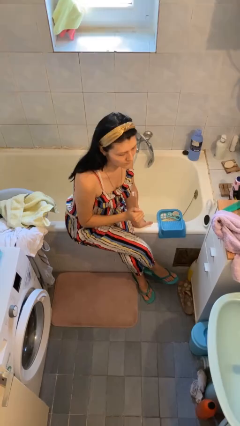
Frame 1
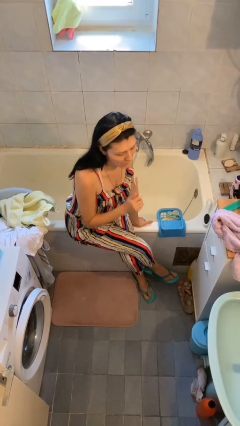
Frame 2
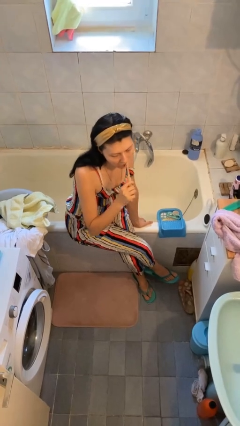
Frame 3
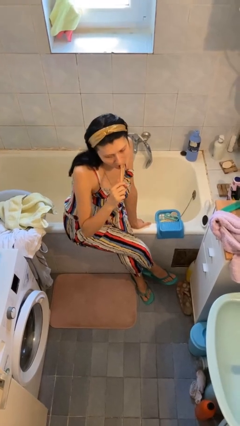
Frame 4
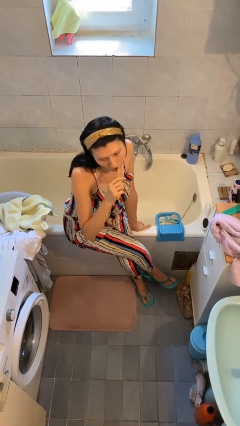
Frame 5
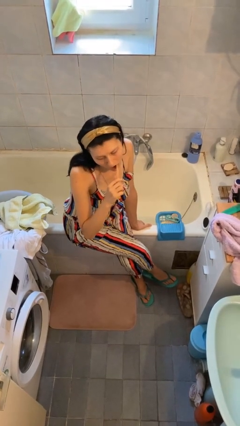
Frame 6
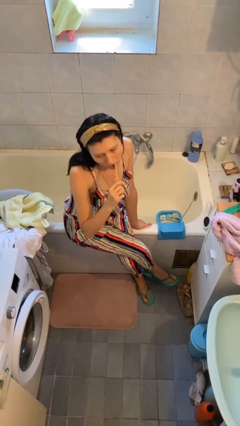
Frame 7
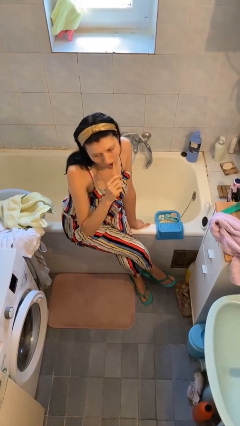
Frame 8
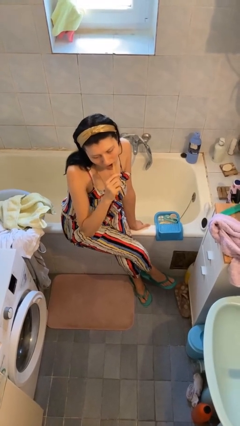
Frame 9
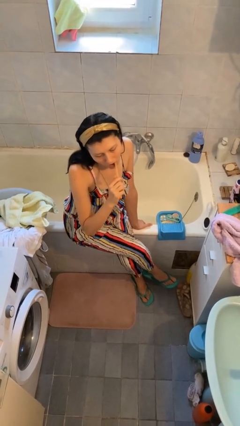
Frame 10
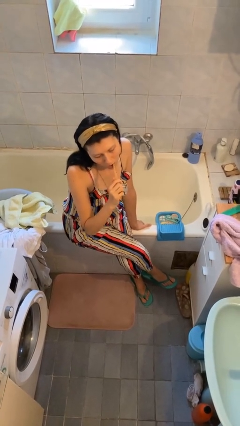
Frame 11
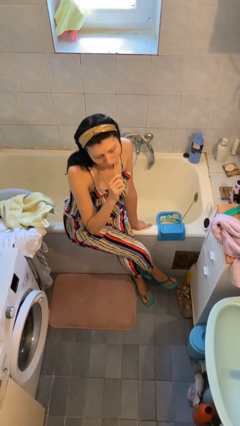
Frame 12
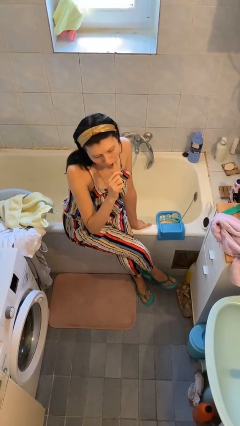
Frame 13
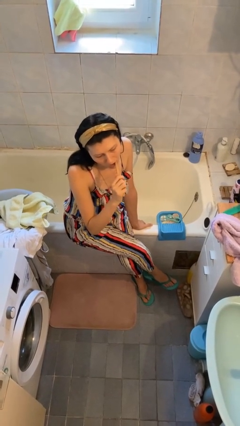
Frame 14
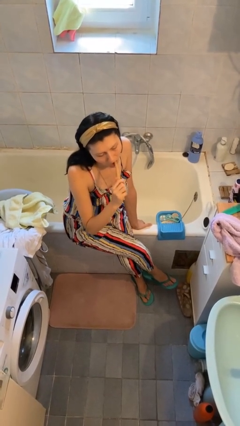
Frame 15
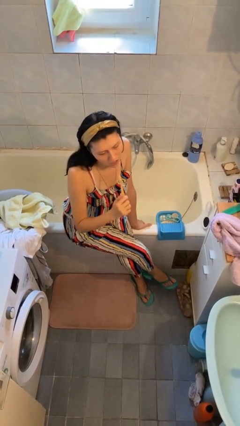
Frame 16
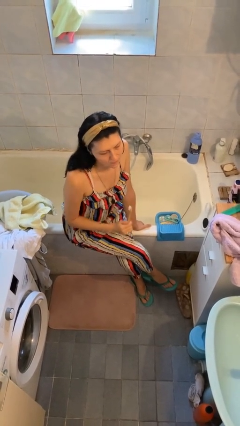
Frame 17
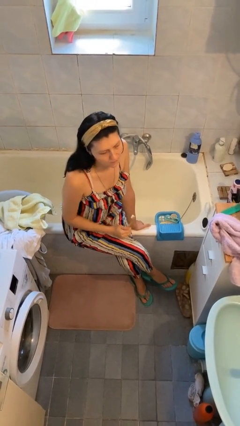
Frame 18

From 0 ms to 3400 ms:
person brushes teeth

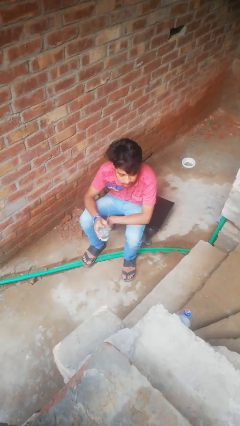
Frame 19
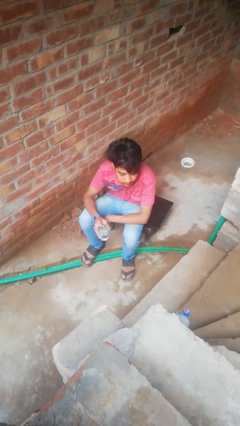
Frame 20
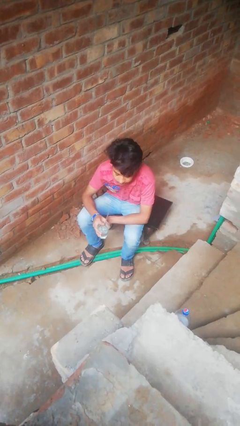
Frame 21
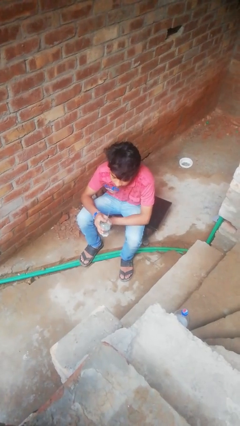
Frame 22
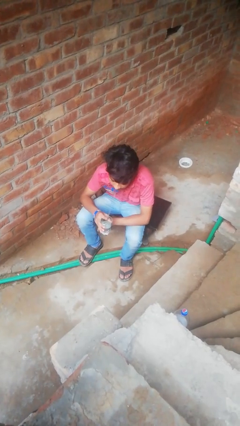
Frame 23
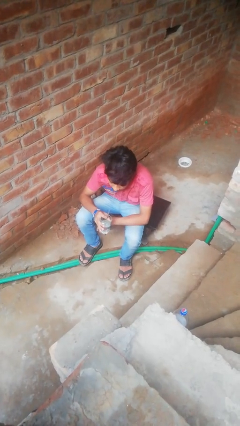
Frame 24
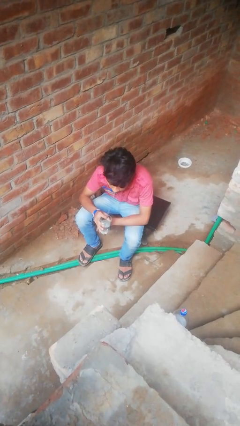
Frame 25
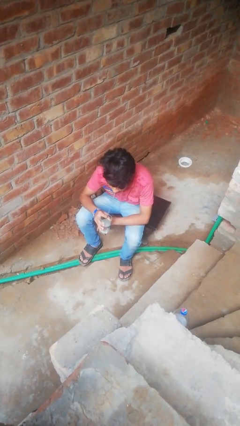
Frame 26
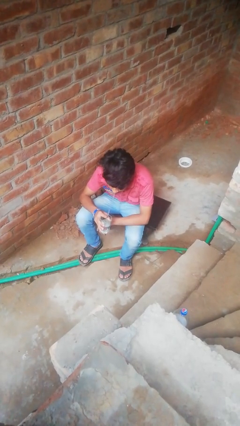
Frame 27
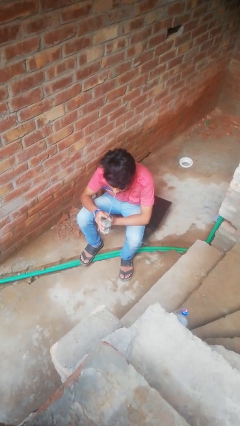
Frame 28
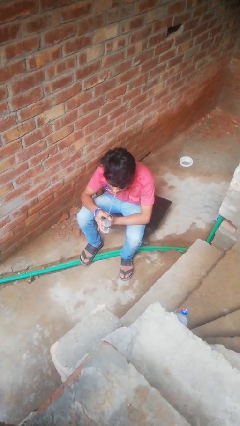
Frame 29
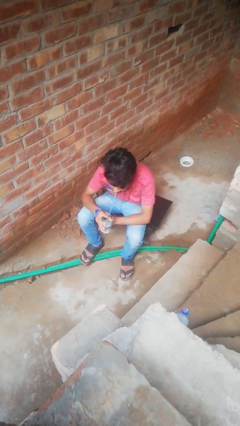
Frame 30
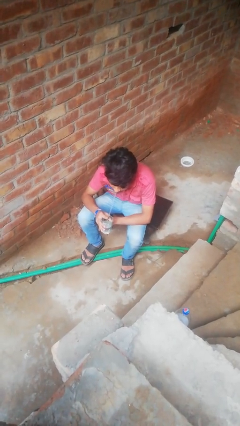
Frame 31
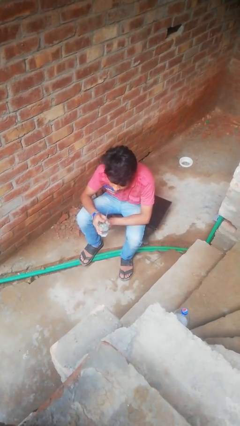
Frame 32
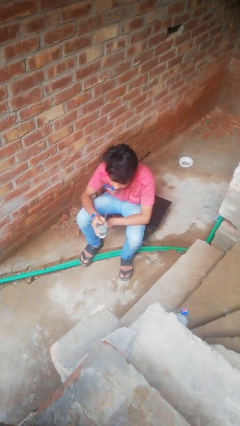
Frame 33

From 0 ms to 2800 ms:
person drinks from straw

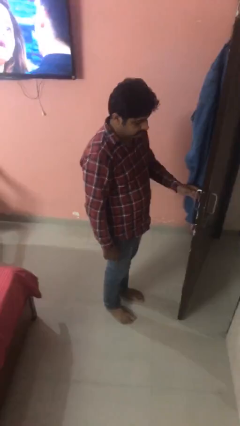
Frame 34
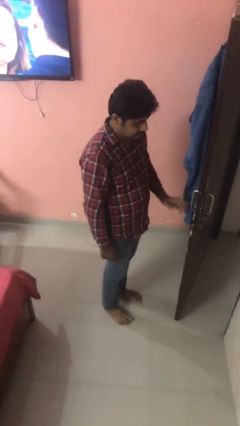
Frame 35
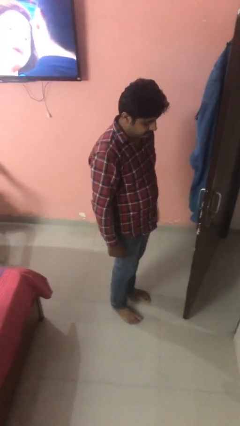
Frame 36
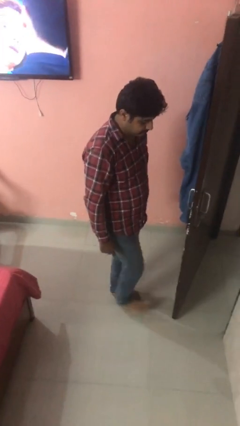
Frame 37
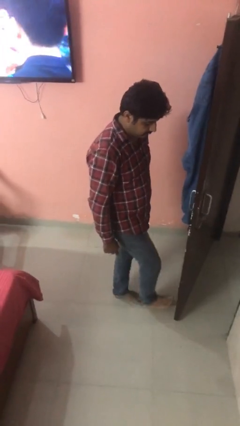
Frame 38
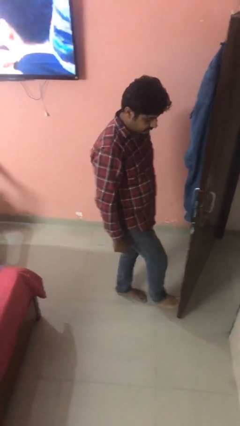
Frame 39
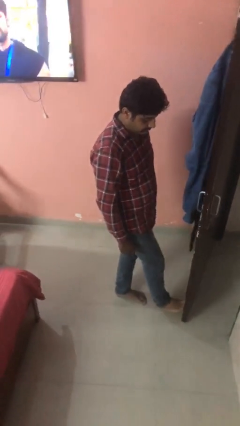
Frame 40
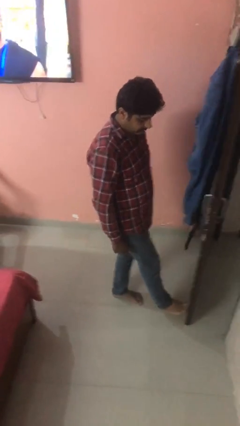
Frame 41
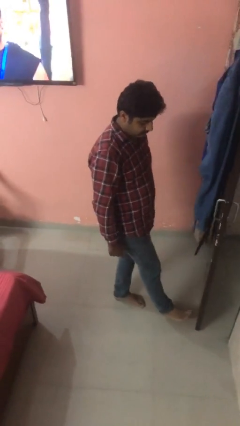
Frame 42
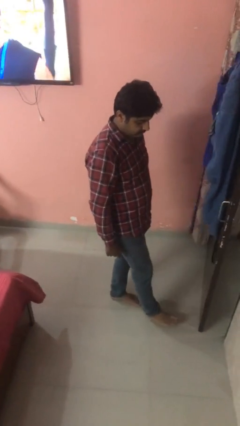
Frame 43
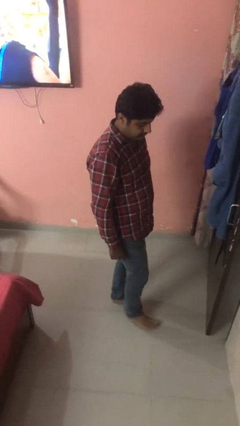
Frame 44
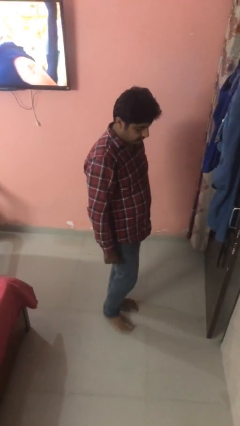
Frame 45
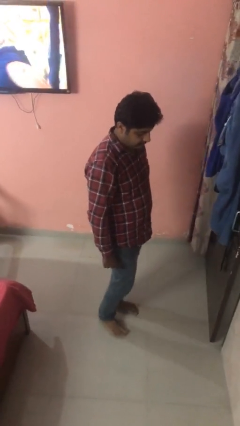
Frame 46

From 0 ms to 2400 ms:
person closes door with foot

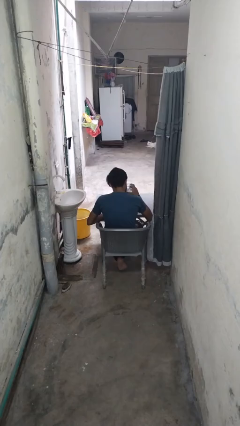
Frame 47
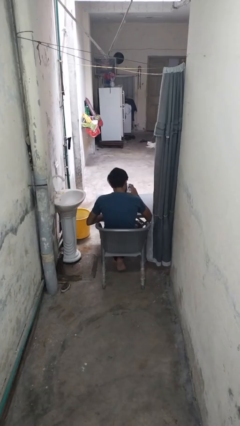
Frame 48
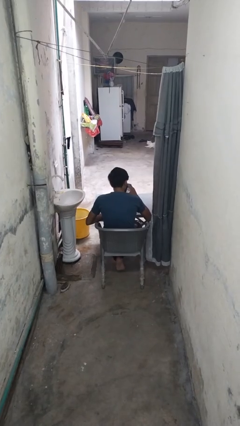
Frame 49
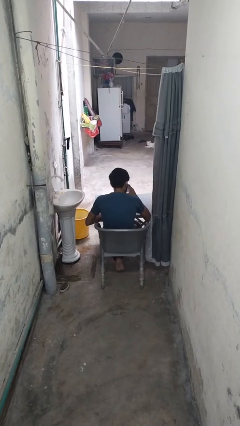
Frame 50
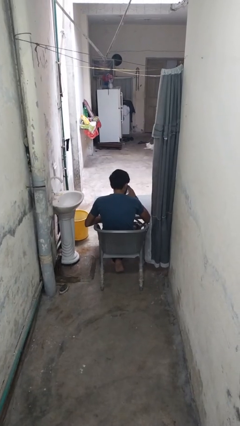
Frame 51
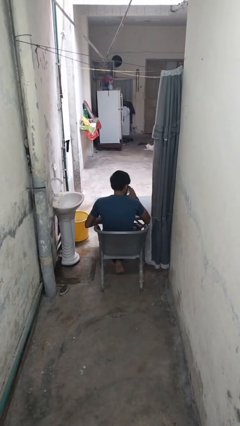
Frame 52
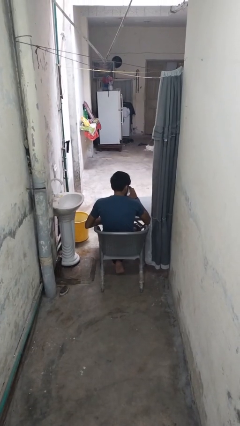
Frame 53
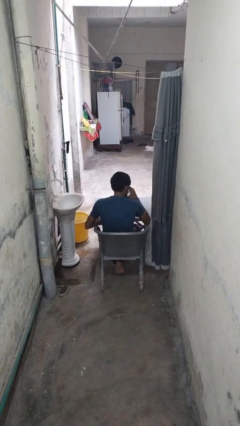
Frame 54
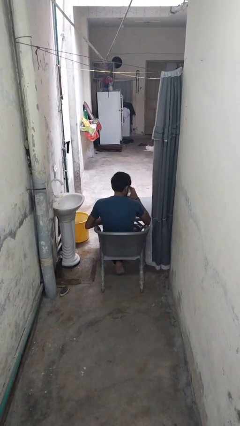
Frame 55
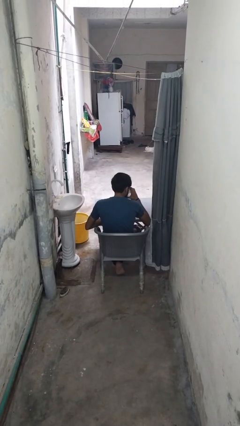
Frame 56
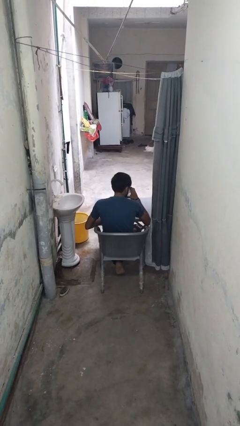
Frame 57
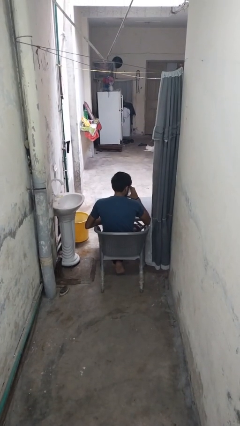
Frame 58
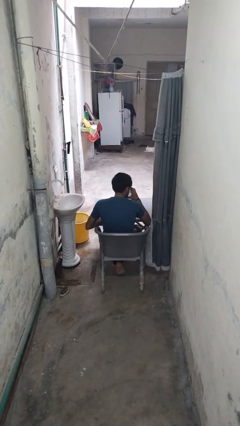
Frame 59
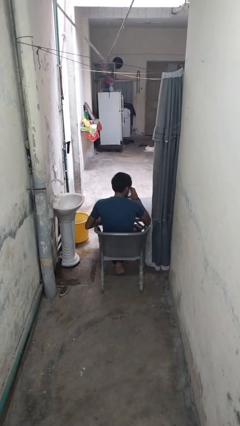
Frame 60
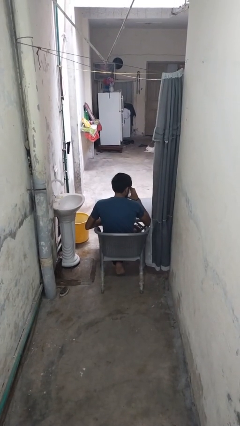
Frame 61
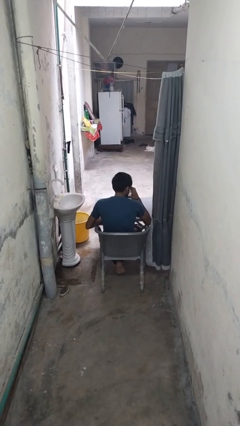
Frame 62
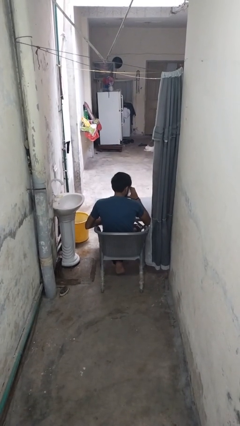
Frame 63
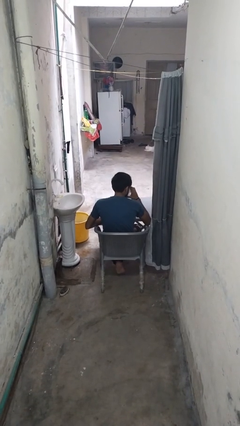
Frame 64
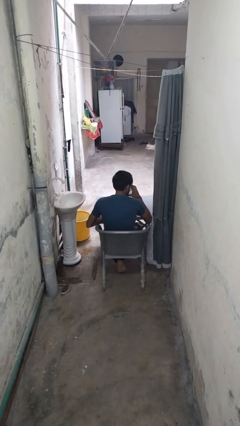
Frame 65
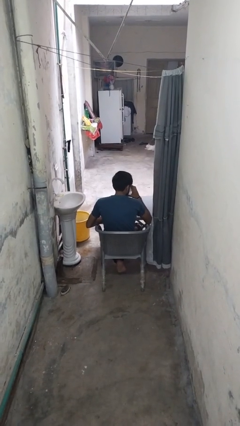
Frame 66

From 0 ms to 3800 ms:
person drinks from mug

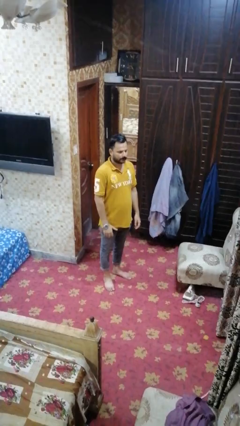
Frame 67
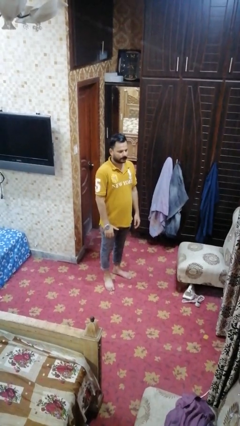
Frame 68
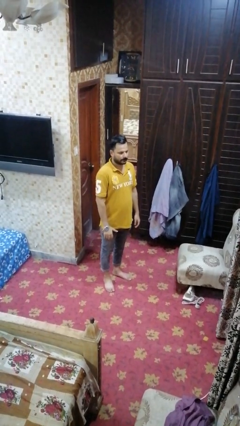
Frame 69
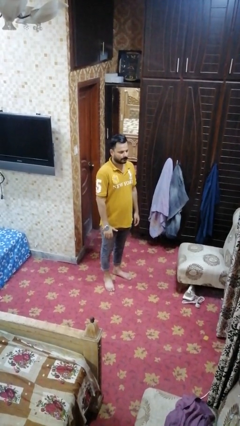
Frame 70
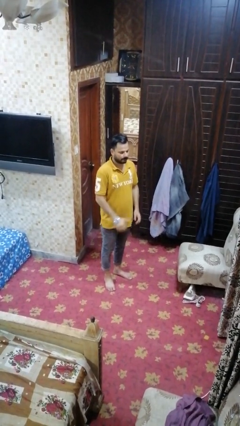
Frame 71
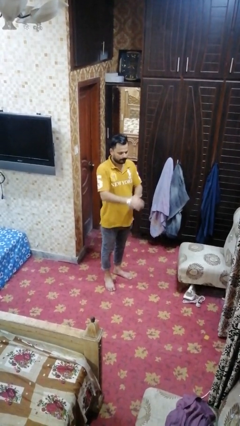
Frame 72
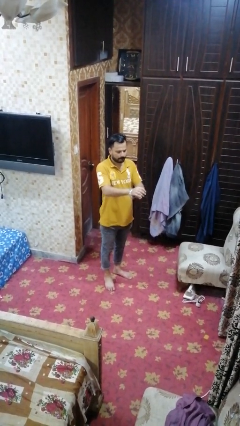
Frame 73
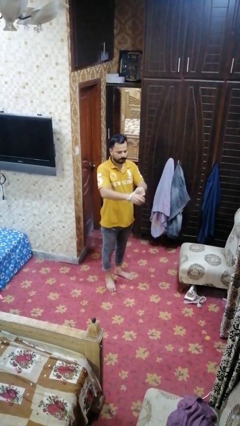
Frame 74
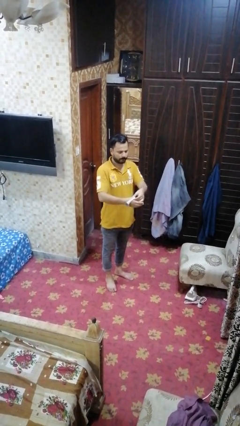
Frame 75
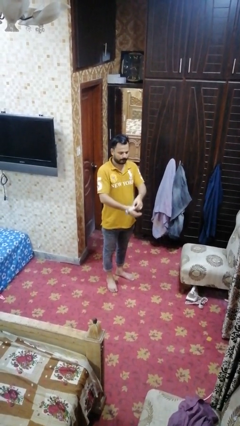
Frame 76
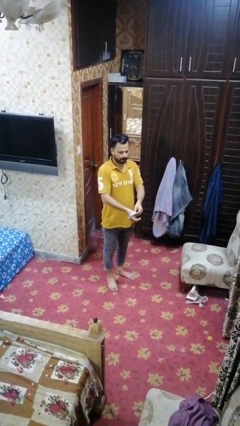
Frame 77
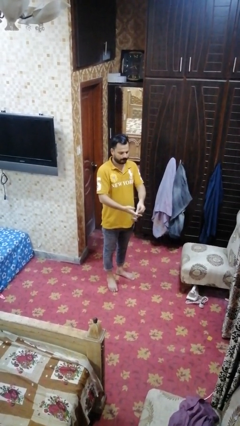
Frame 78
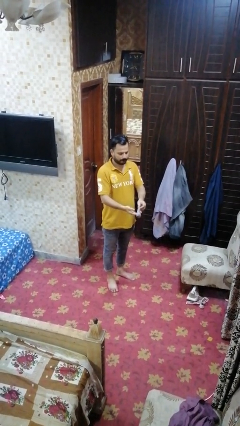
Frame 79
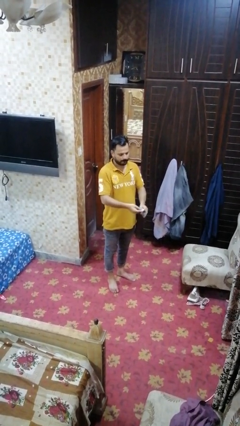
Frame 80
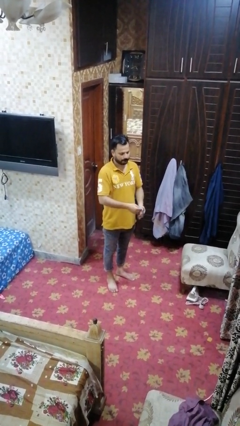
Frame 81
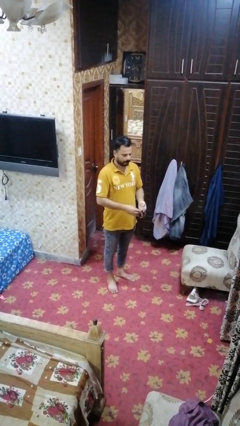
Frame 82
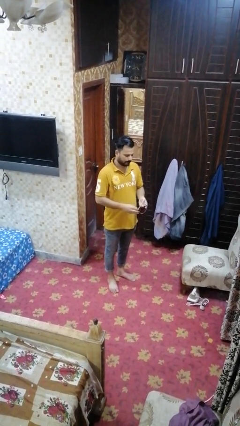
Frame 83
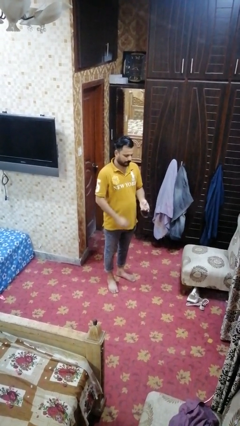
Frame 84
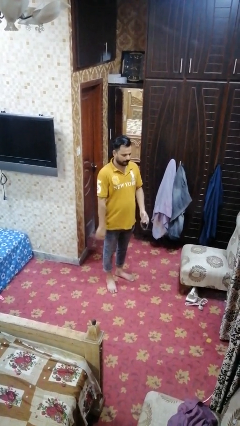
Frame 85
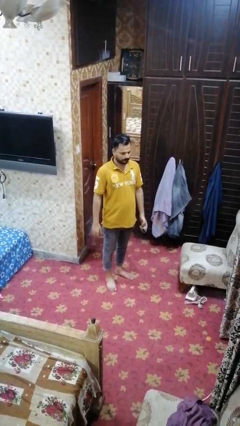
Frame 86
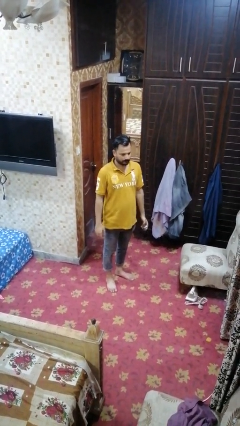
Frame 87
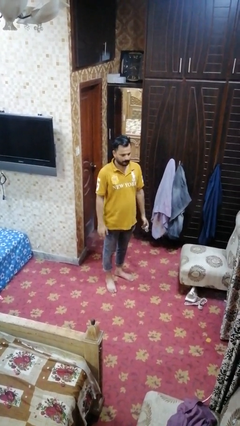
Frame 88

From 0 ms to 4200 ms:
person takes off wristwatch

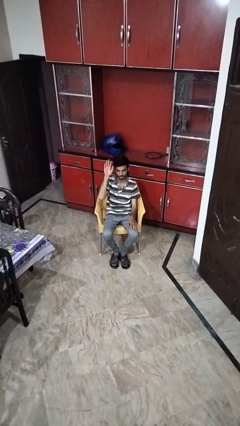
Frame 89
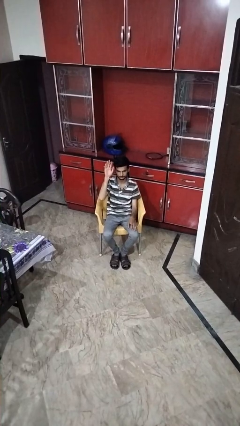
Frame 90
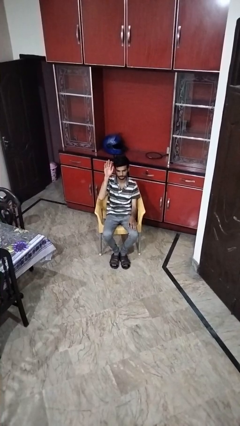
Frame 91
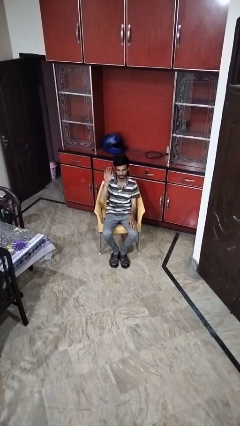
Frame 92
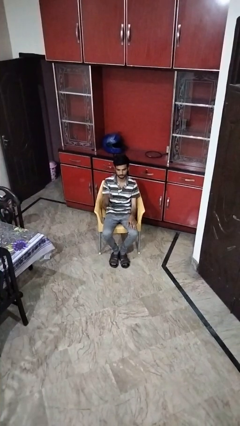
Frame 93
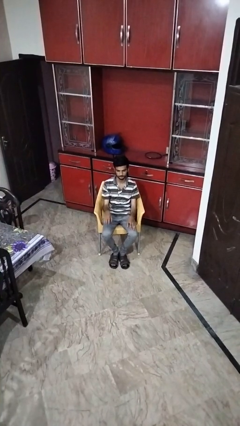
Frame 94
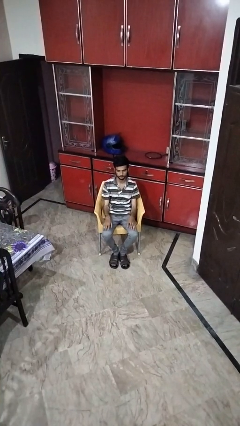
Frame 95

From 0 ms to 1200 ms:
person gestures lower hand
